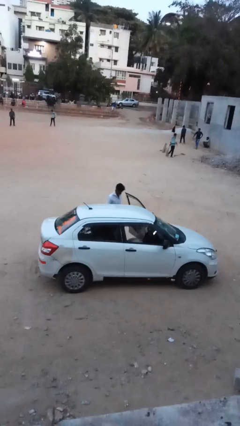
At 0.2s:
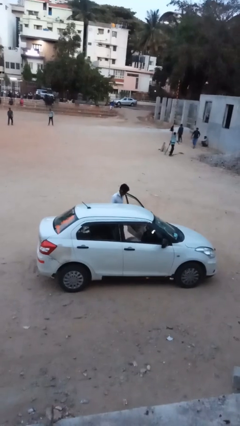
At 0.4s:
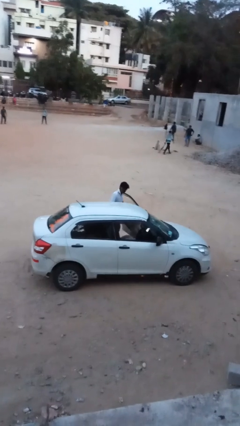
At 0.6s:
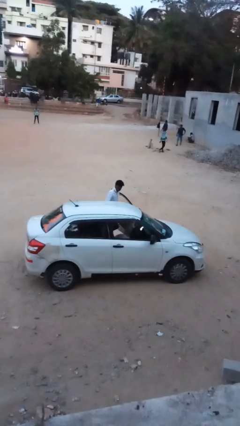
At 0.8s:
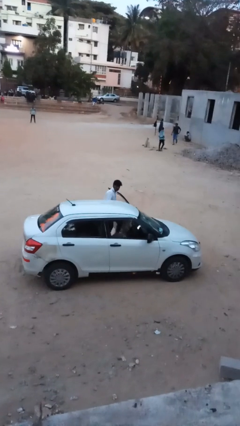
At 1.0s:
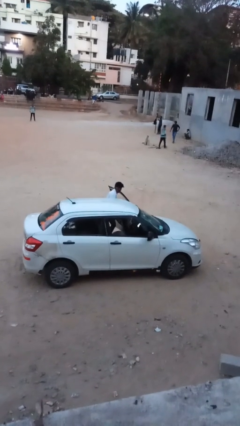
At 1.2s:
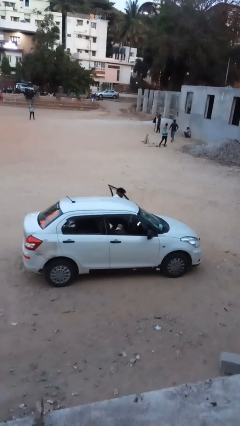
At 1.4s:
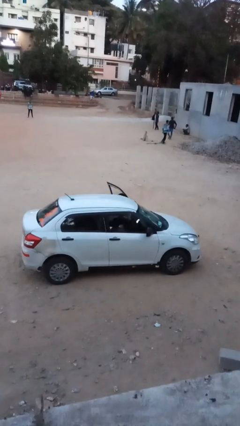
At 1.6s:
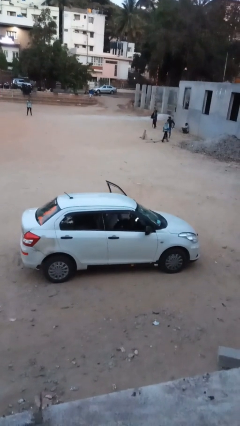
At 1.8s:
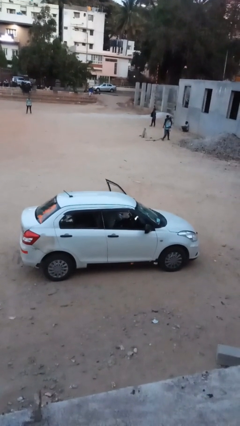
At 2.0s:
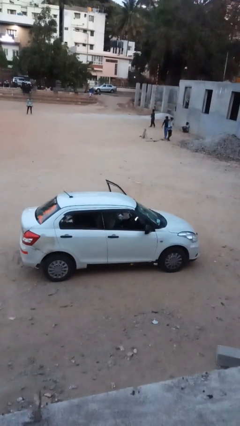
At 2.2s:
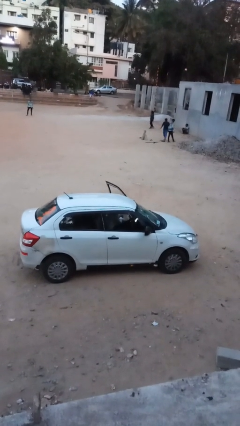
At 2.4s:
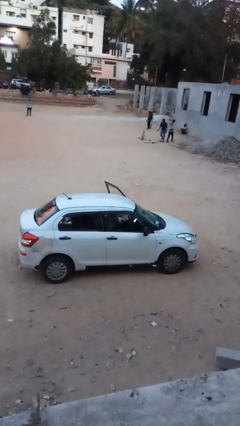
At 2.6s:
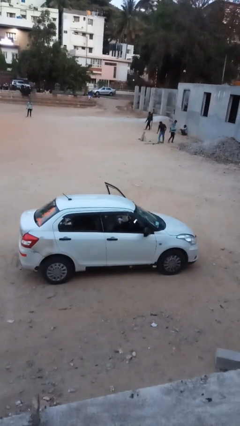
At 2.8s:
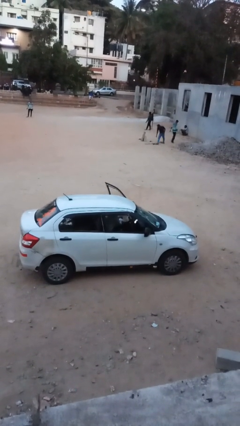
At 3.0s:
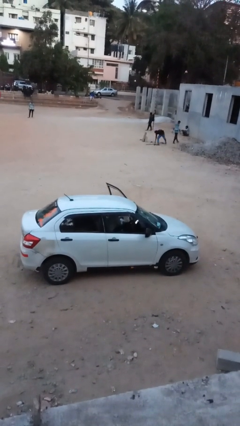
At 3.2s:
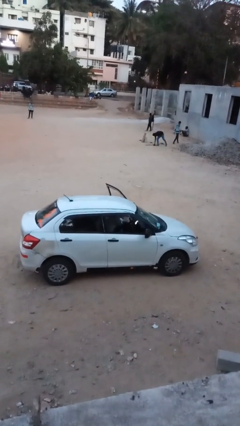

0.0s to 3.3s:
person enters car

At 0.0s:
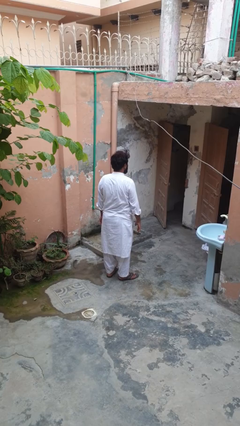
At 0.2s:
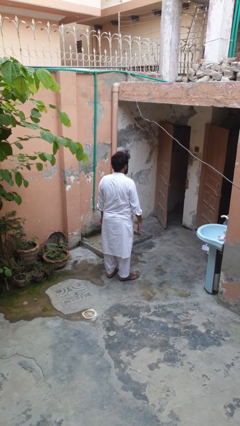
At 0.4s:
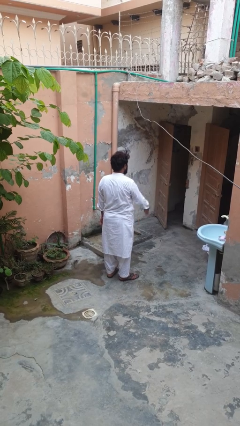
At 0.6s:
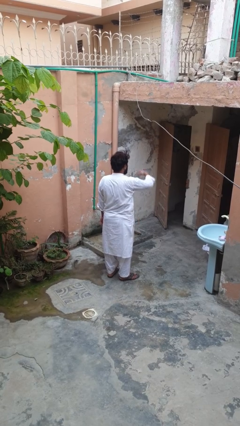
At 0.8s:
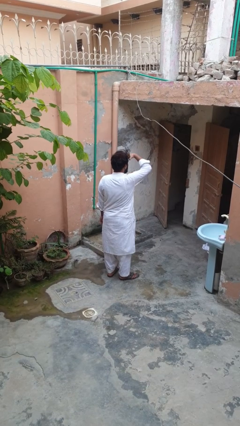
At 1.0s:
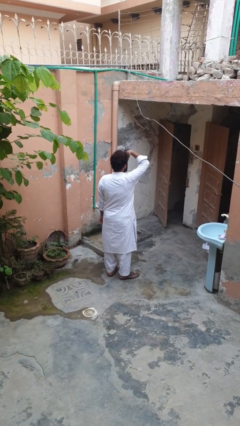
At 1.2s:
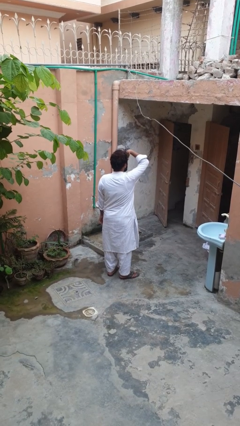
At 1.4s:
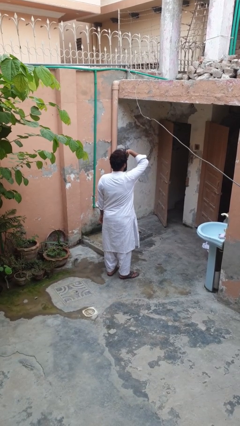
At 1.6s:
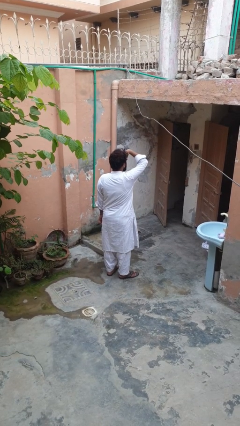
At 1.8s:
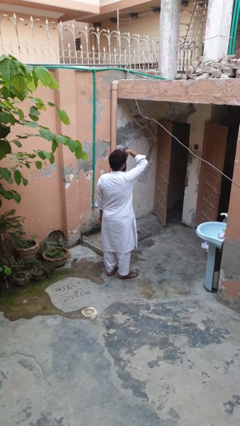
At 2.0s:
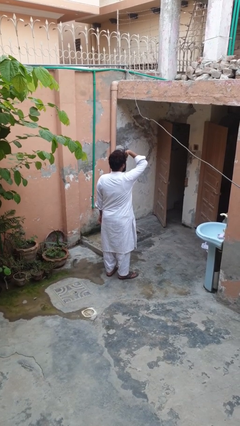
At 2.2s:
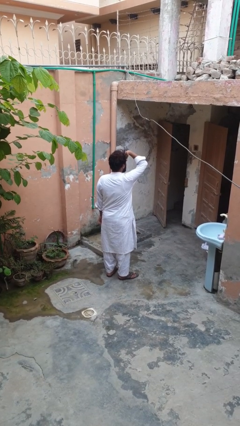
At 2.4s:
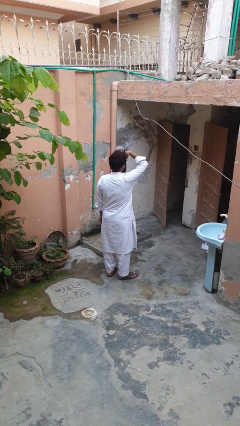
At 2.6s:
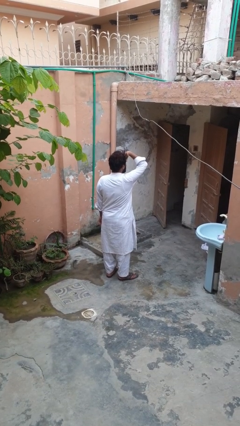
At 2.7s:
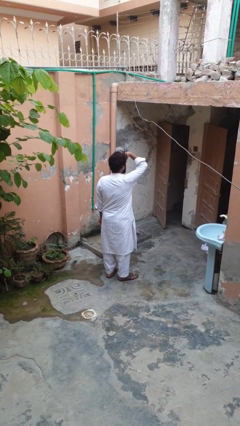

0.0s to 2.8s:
person shades eyes

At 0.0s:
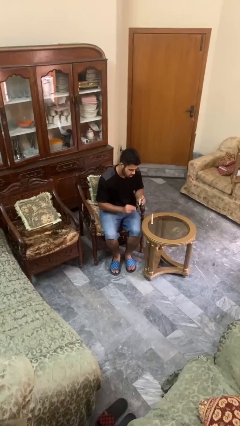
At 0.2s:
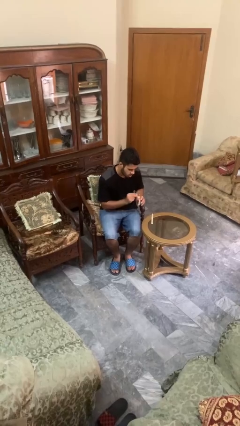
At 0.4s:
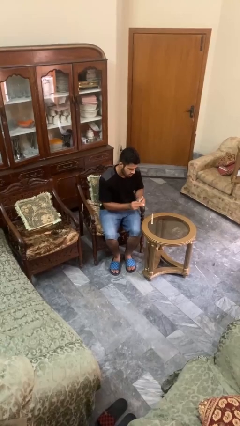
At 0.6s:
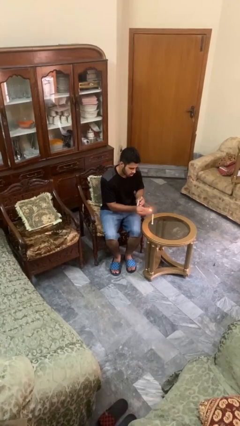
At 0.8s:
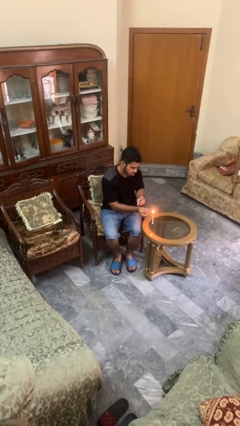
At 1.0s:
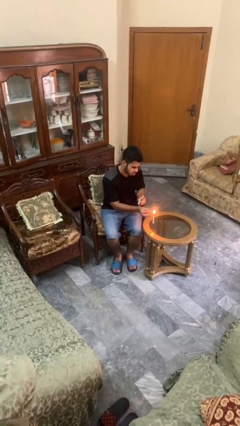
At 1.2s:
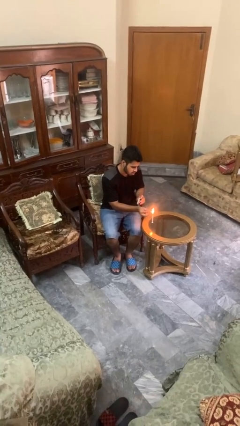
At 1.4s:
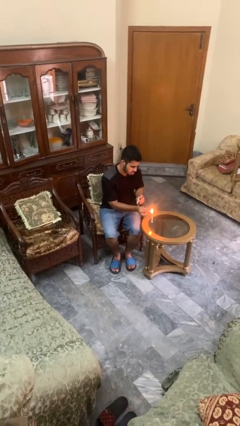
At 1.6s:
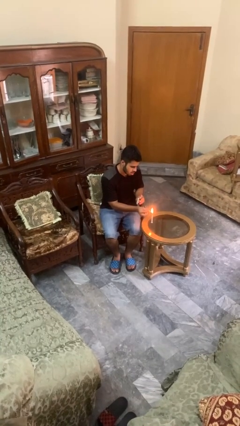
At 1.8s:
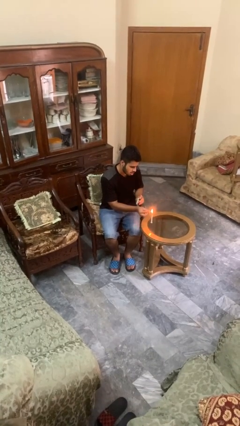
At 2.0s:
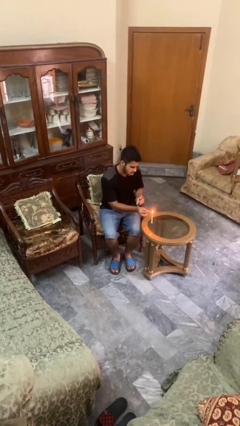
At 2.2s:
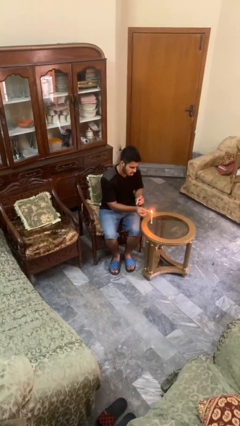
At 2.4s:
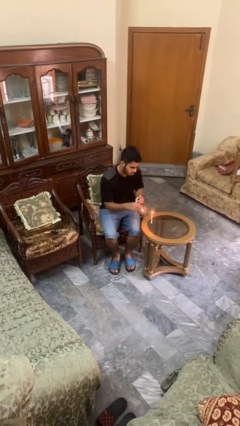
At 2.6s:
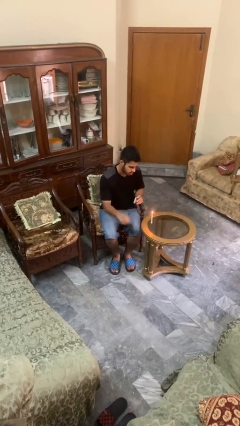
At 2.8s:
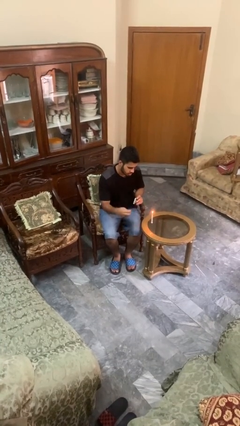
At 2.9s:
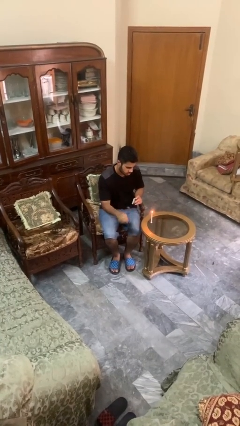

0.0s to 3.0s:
person lights candle

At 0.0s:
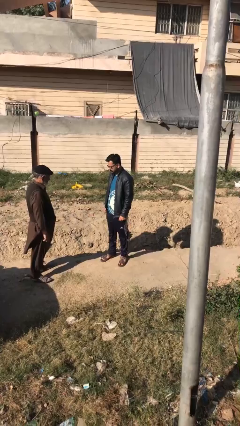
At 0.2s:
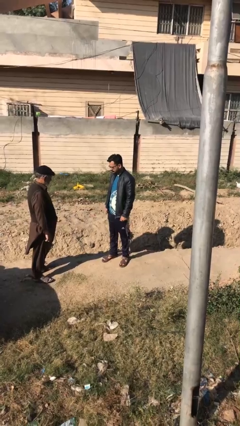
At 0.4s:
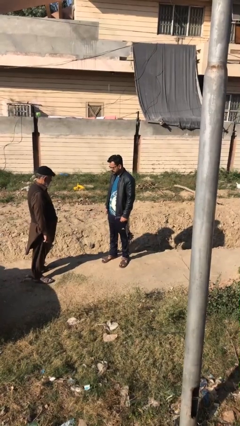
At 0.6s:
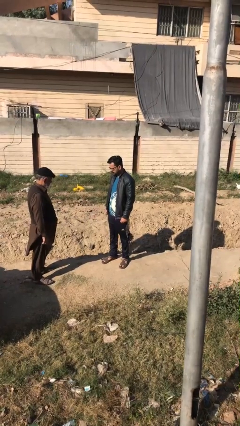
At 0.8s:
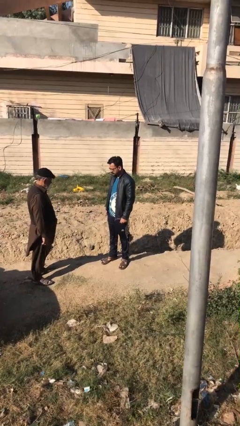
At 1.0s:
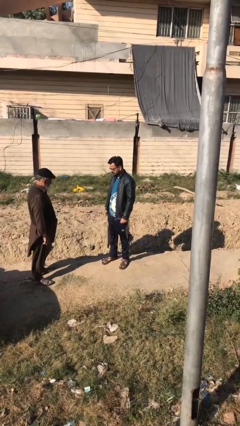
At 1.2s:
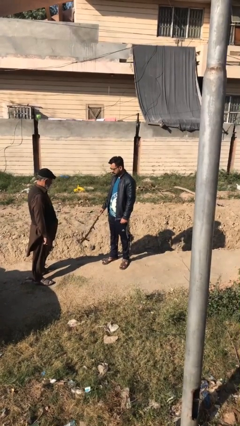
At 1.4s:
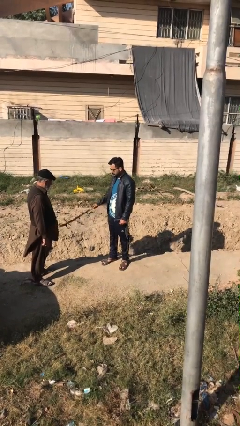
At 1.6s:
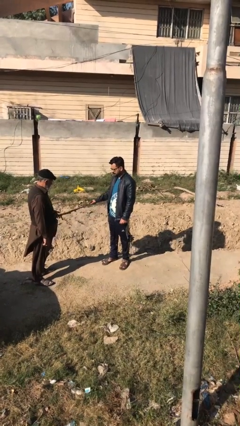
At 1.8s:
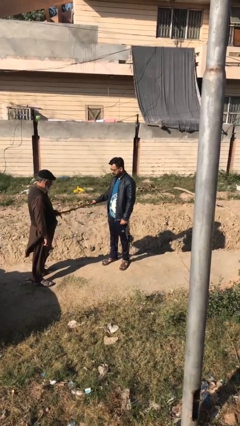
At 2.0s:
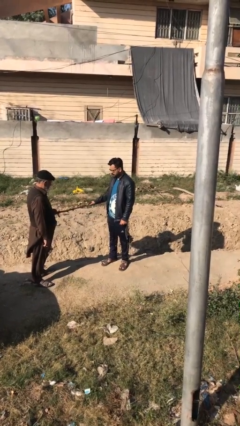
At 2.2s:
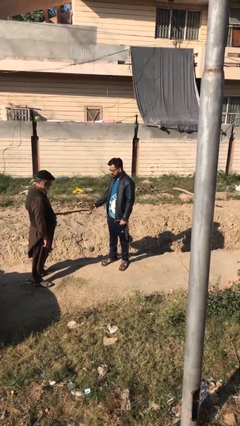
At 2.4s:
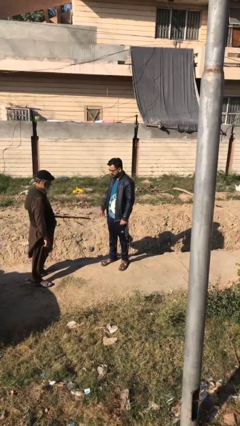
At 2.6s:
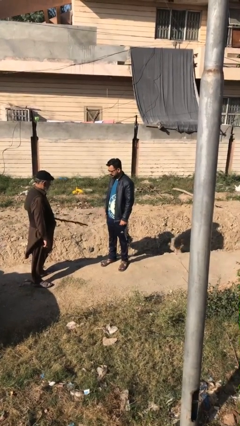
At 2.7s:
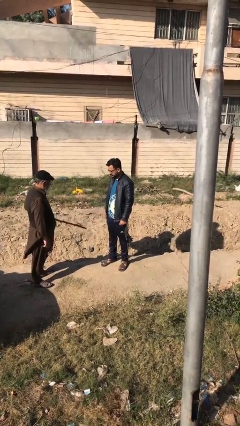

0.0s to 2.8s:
person transfers object to person

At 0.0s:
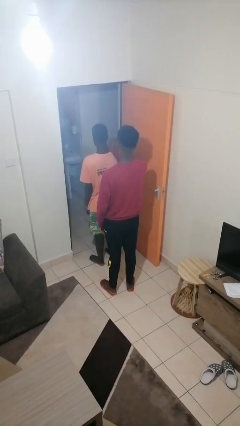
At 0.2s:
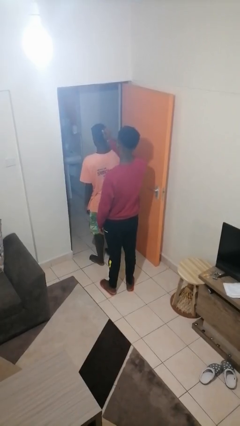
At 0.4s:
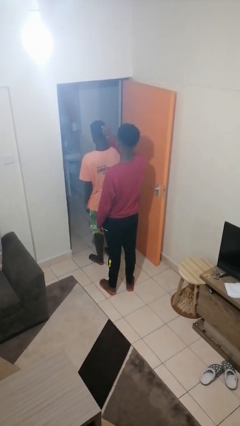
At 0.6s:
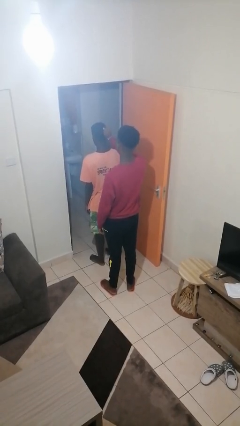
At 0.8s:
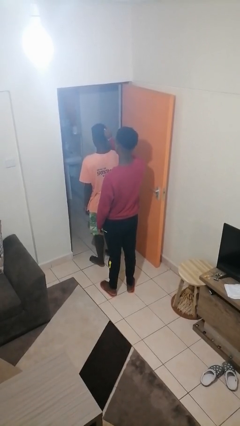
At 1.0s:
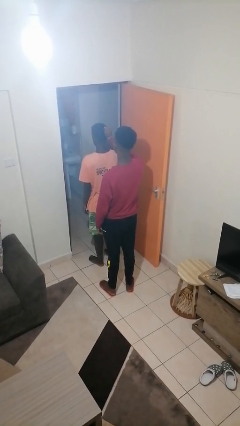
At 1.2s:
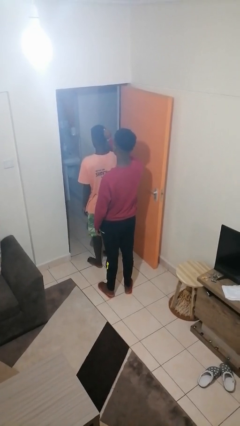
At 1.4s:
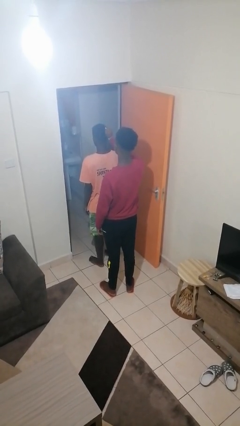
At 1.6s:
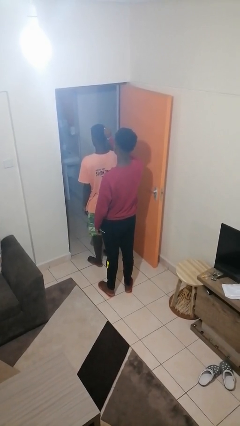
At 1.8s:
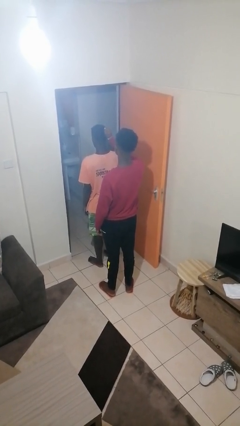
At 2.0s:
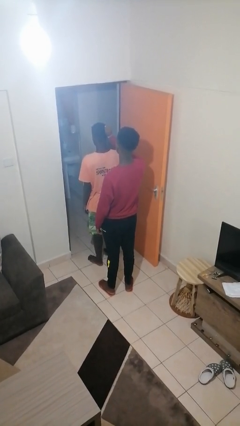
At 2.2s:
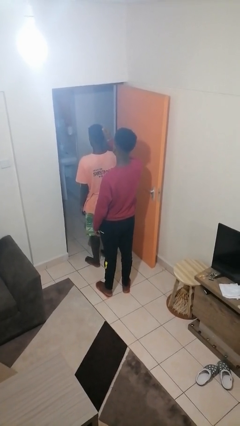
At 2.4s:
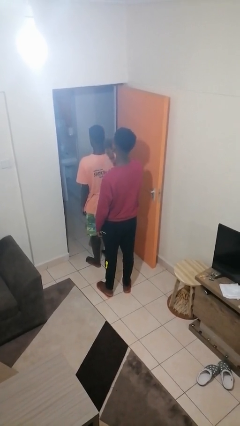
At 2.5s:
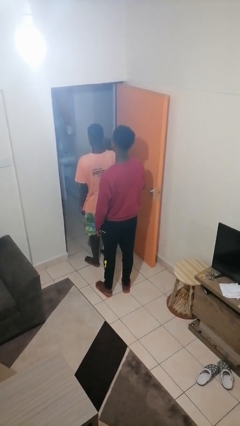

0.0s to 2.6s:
person grabs person by hair

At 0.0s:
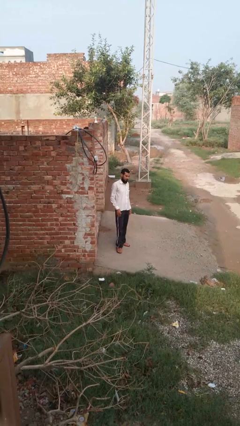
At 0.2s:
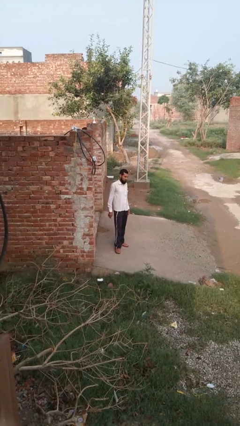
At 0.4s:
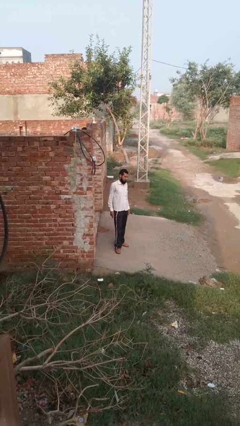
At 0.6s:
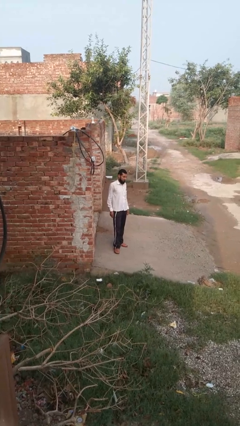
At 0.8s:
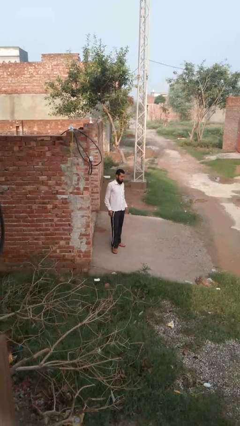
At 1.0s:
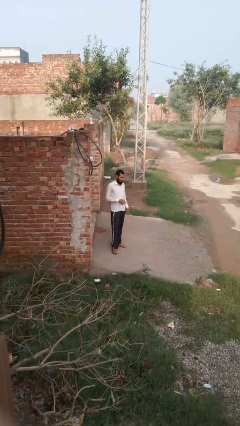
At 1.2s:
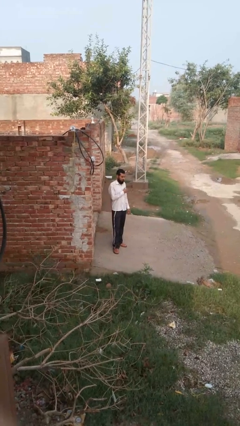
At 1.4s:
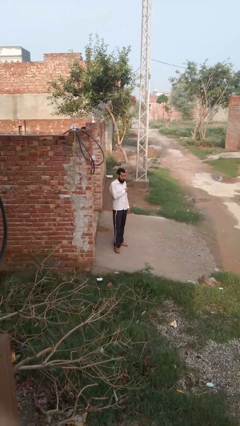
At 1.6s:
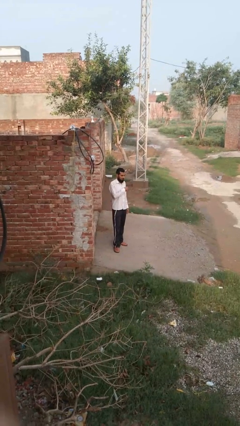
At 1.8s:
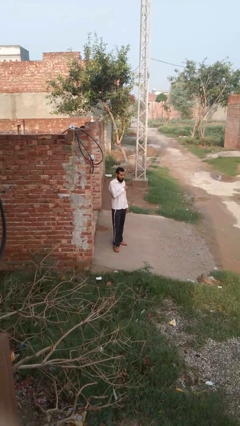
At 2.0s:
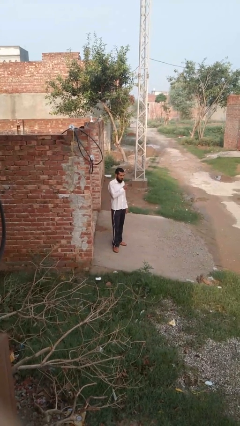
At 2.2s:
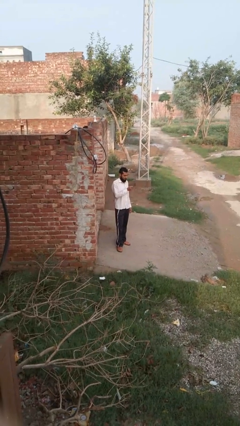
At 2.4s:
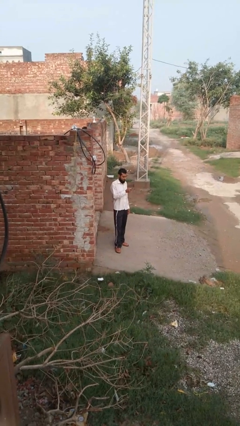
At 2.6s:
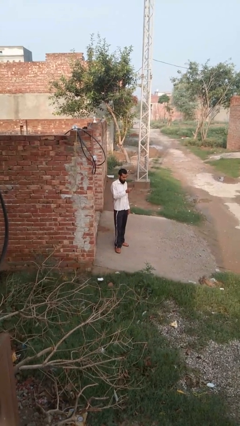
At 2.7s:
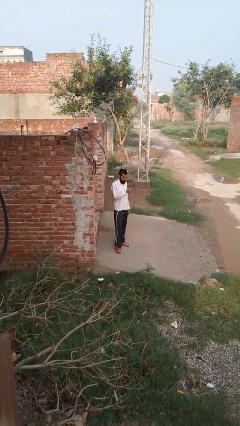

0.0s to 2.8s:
person takes phone from pocket

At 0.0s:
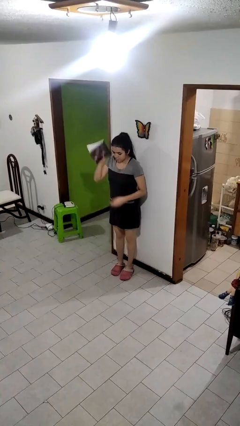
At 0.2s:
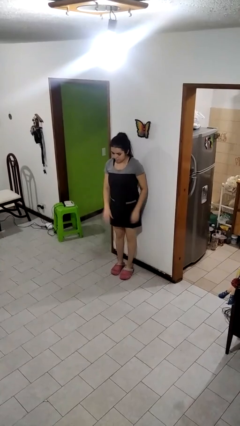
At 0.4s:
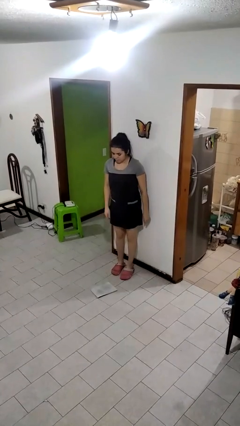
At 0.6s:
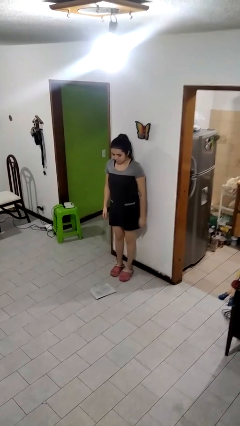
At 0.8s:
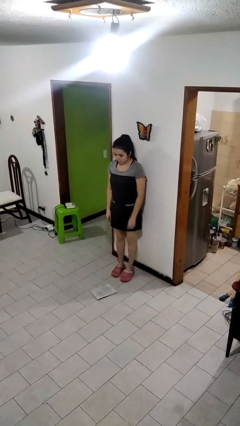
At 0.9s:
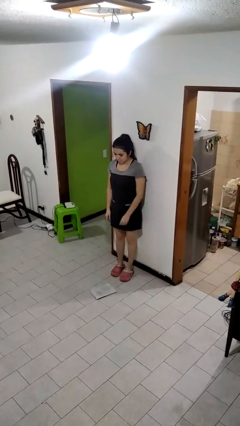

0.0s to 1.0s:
person throws object to ground
